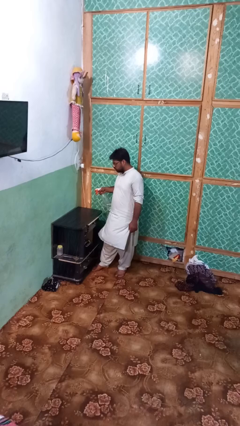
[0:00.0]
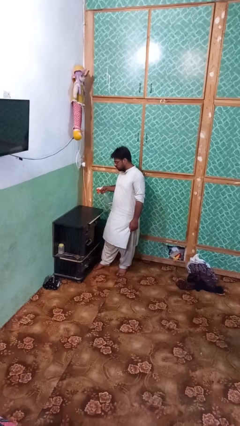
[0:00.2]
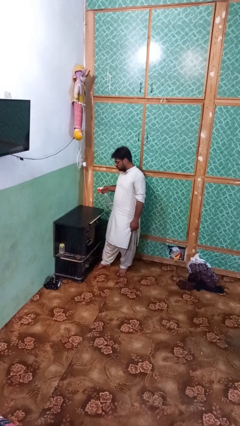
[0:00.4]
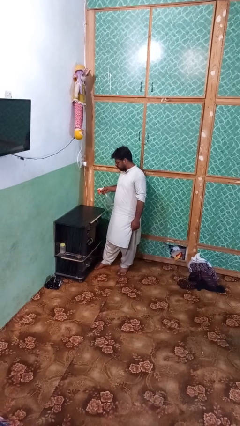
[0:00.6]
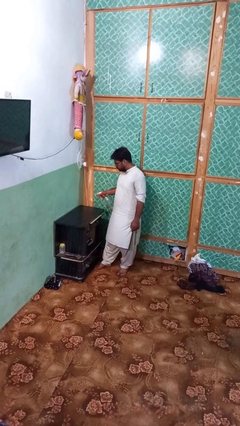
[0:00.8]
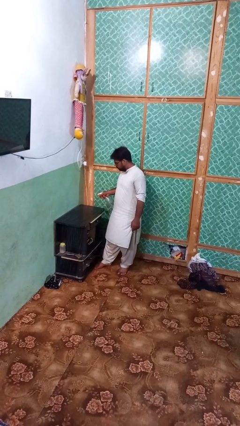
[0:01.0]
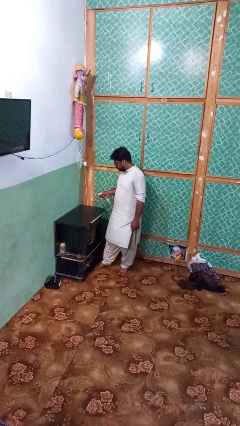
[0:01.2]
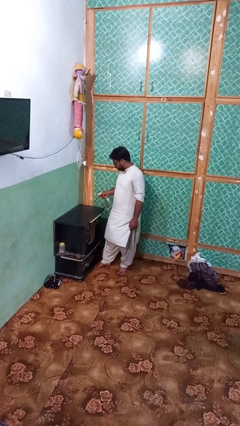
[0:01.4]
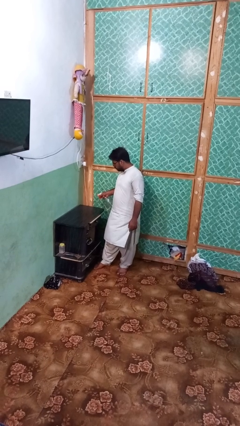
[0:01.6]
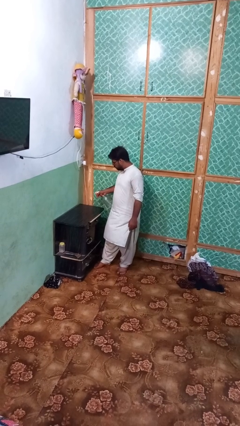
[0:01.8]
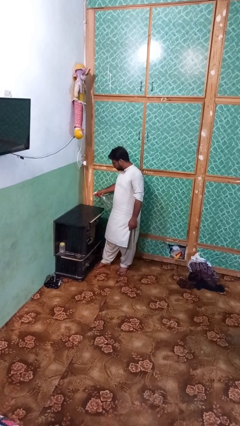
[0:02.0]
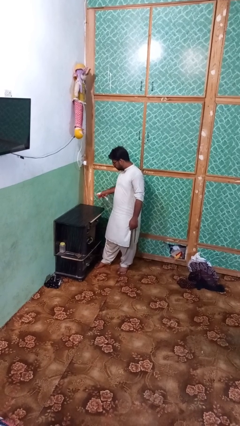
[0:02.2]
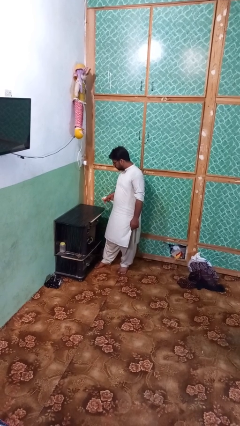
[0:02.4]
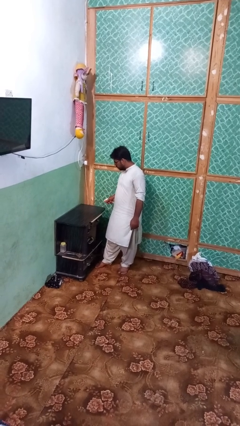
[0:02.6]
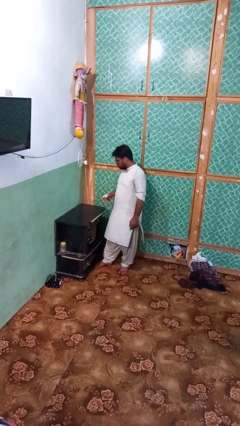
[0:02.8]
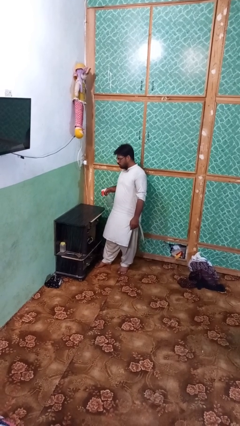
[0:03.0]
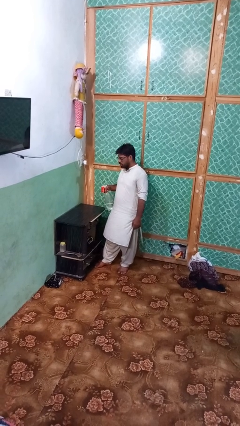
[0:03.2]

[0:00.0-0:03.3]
person sprays from bottle

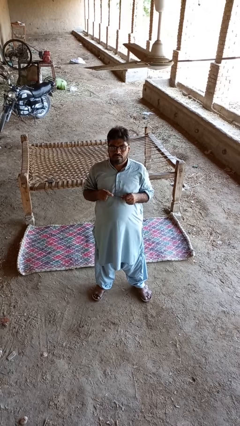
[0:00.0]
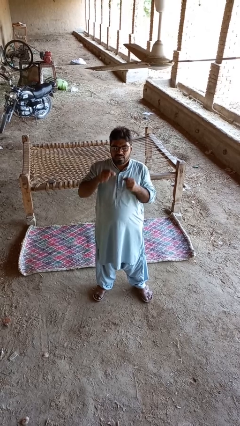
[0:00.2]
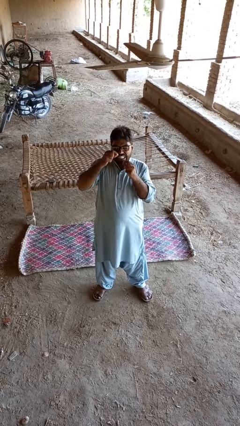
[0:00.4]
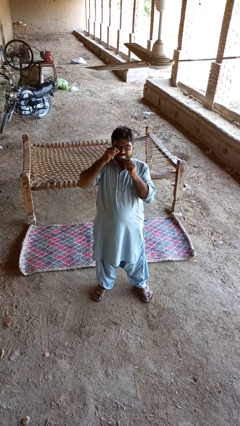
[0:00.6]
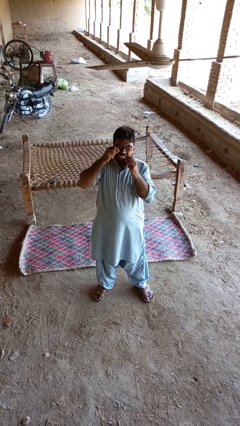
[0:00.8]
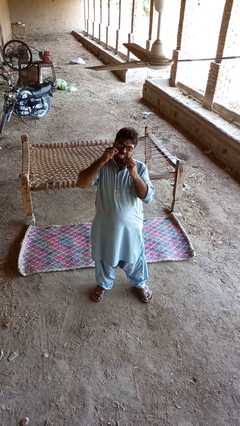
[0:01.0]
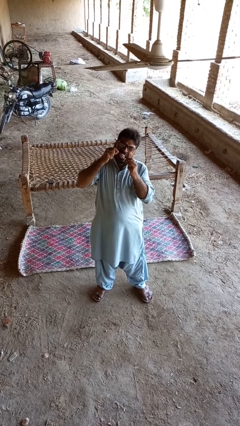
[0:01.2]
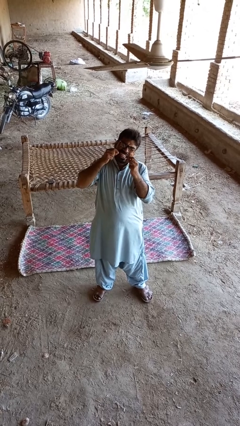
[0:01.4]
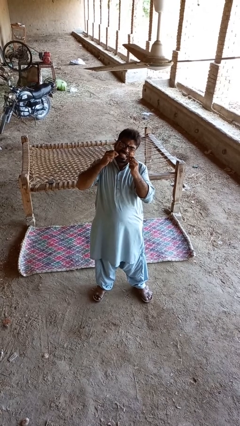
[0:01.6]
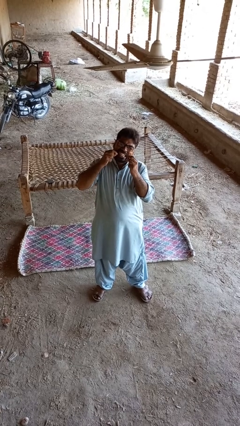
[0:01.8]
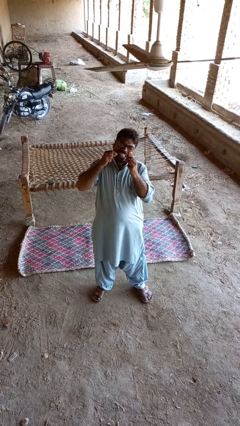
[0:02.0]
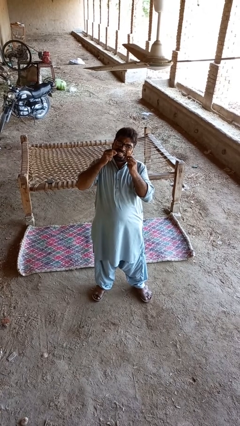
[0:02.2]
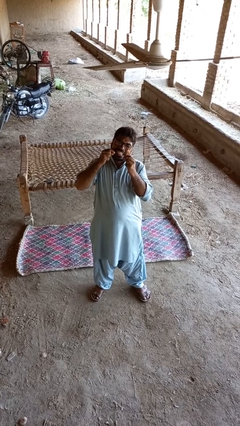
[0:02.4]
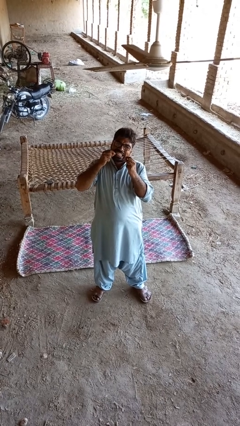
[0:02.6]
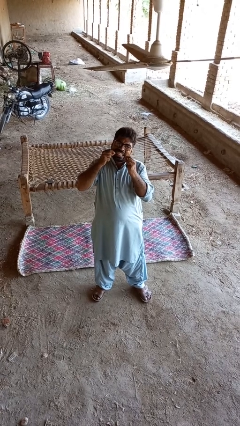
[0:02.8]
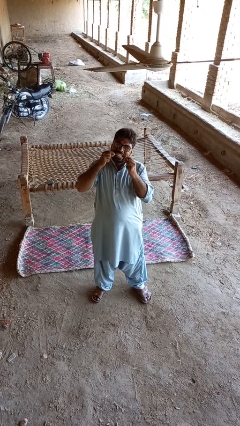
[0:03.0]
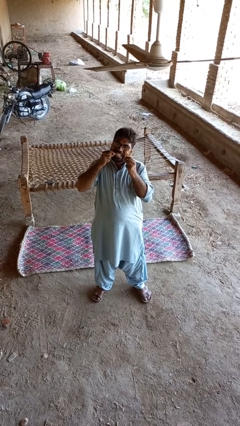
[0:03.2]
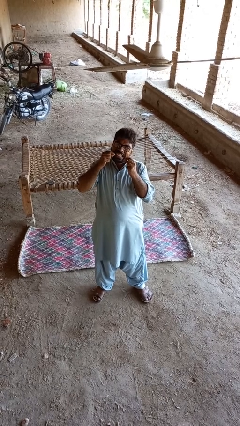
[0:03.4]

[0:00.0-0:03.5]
person flosses

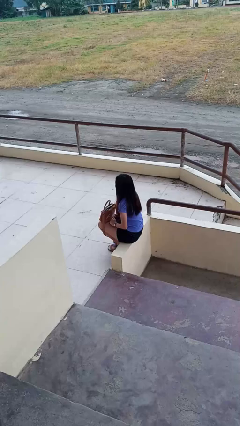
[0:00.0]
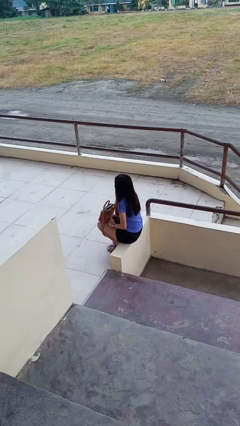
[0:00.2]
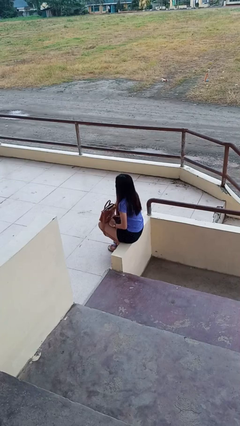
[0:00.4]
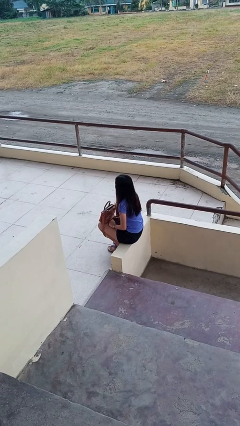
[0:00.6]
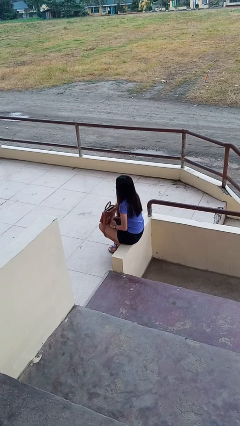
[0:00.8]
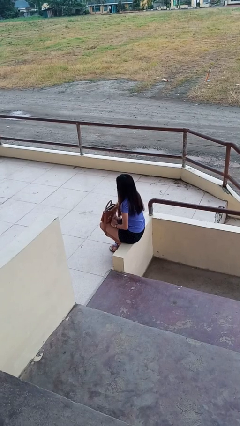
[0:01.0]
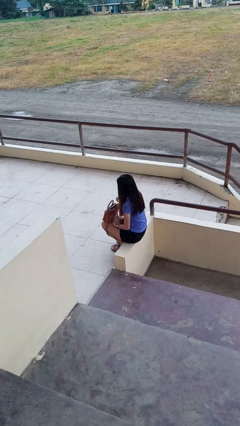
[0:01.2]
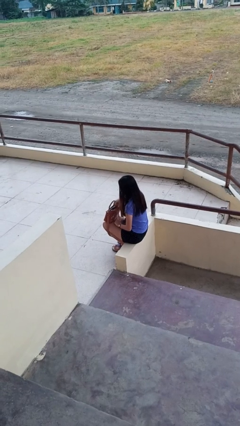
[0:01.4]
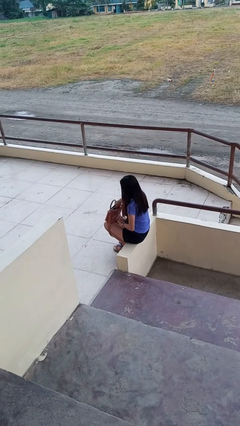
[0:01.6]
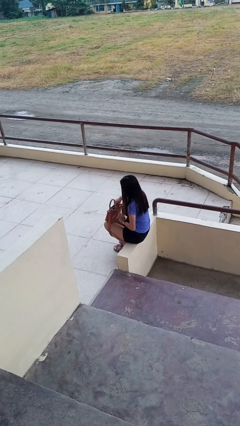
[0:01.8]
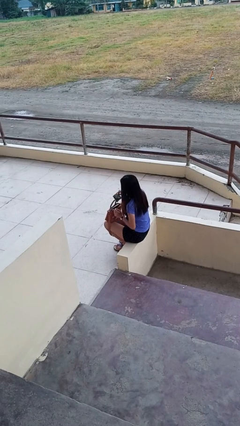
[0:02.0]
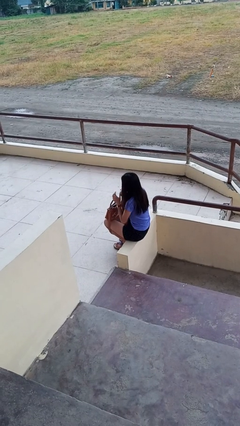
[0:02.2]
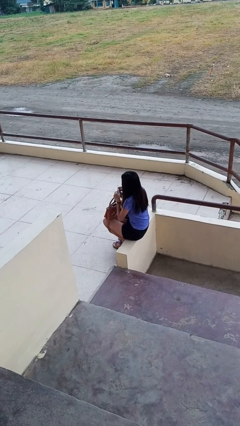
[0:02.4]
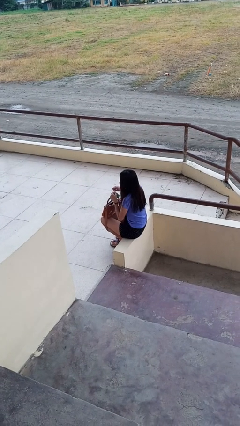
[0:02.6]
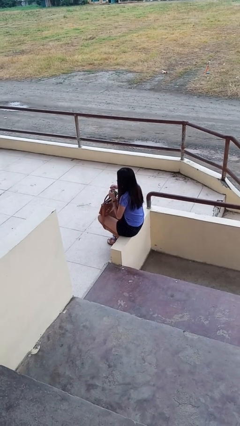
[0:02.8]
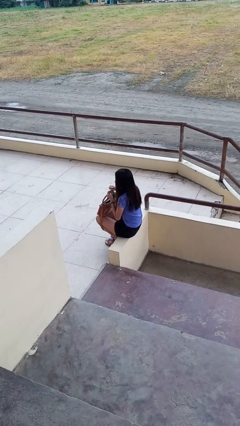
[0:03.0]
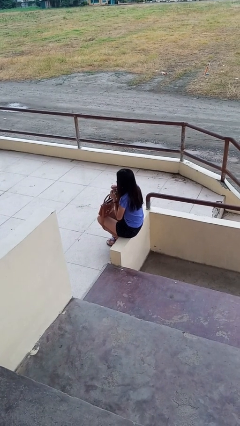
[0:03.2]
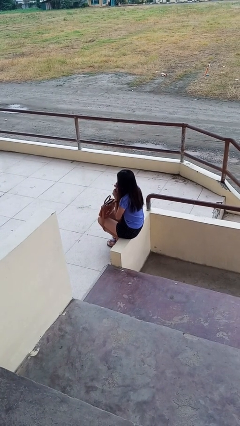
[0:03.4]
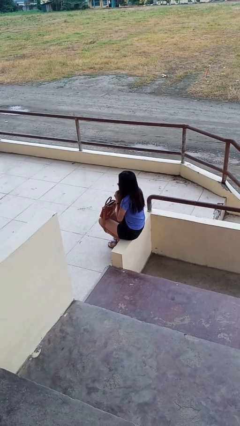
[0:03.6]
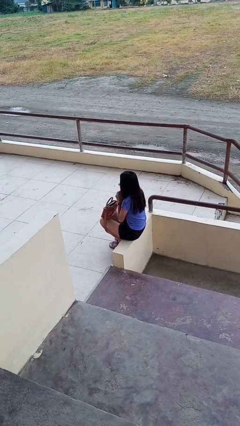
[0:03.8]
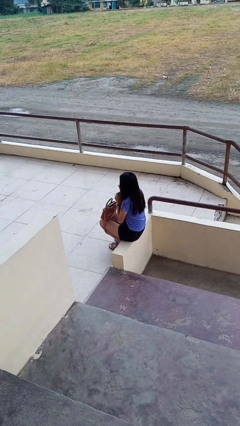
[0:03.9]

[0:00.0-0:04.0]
person eats snack from bag

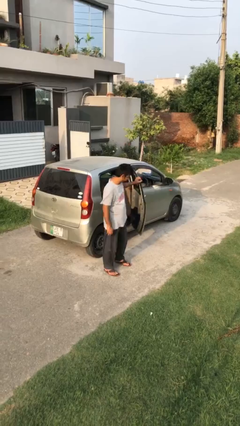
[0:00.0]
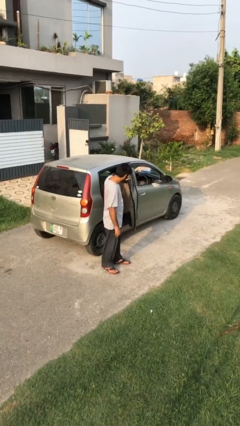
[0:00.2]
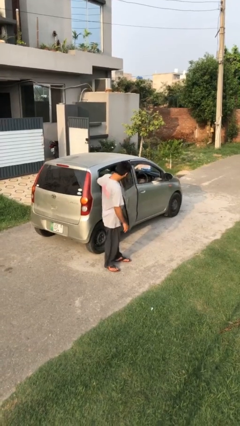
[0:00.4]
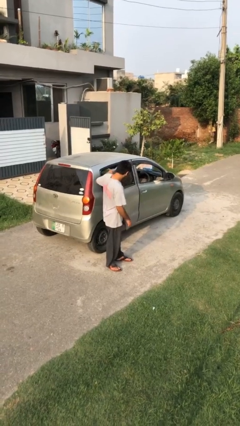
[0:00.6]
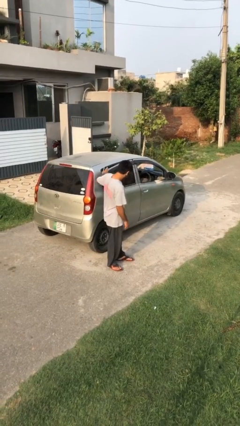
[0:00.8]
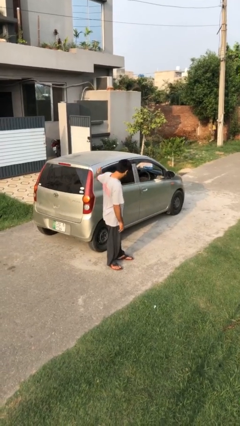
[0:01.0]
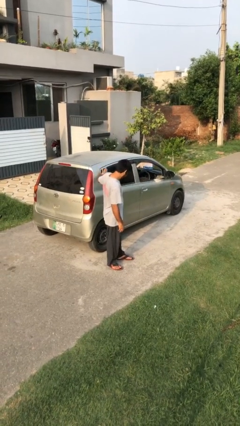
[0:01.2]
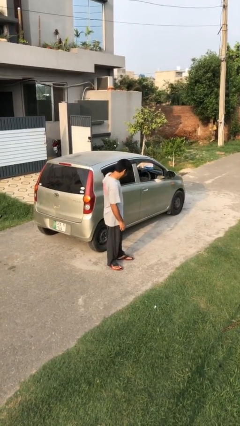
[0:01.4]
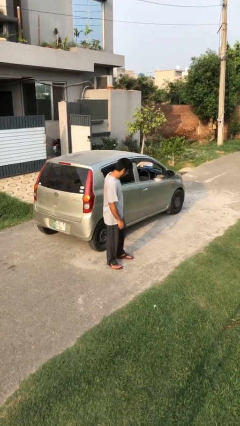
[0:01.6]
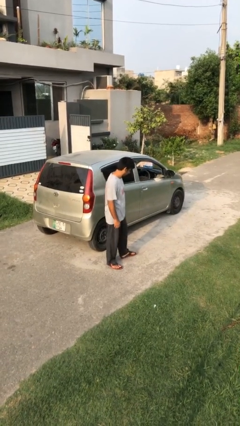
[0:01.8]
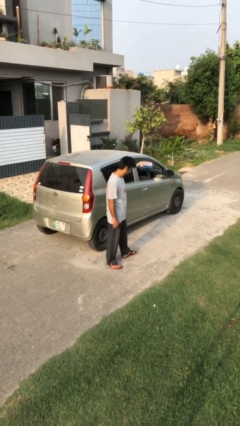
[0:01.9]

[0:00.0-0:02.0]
person closes car door

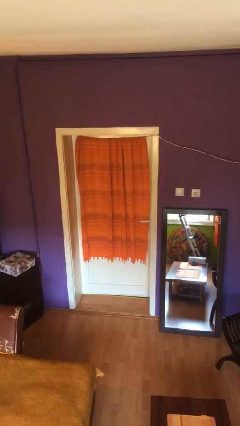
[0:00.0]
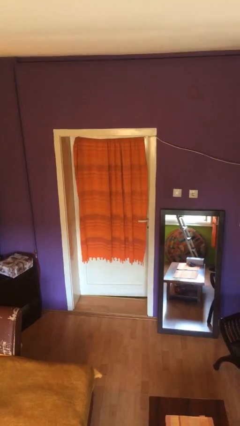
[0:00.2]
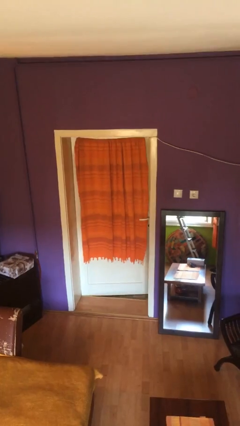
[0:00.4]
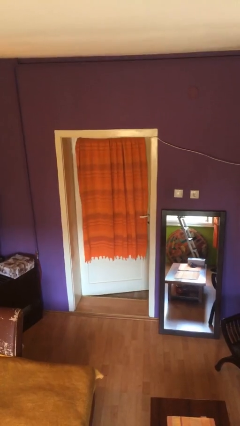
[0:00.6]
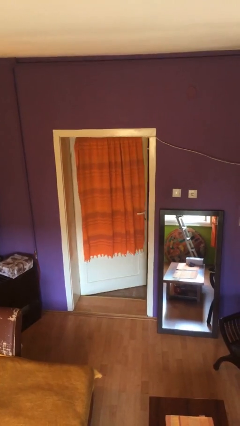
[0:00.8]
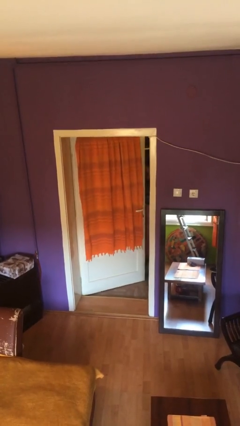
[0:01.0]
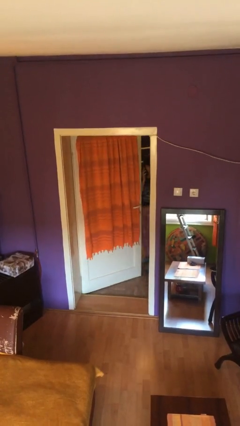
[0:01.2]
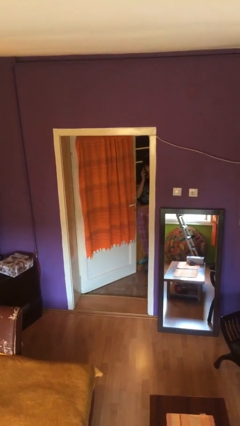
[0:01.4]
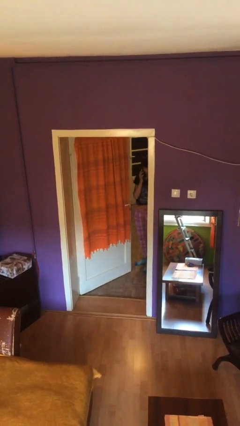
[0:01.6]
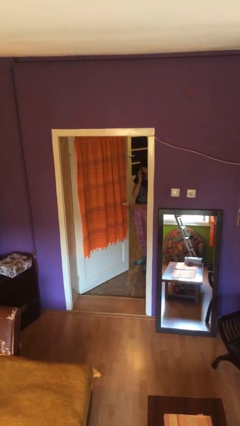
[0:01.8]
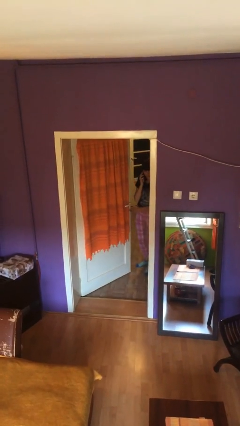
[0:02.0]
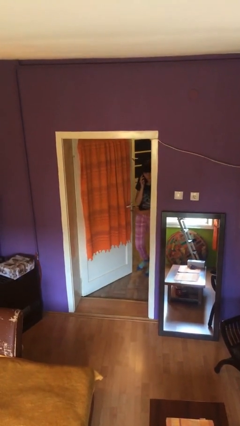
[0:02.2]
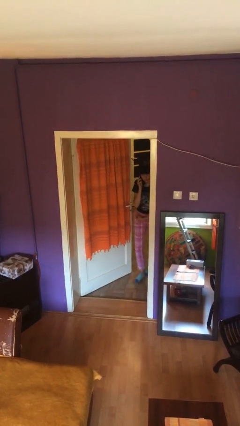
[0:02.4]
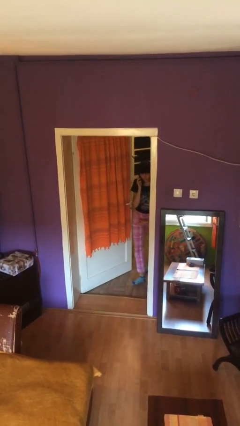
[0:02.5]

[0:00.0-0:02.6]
person opens facility door

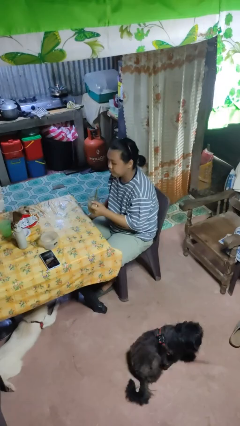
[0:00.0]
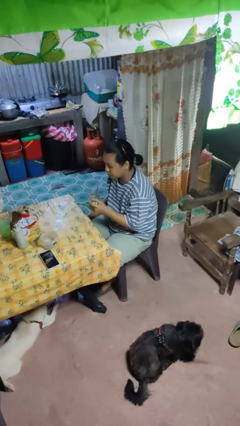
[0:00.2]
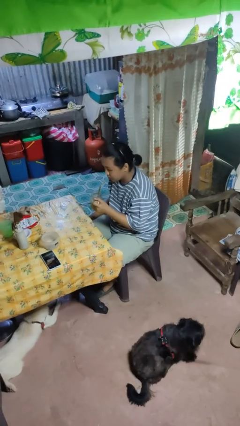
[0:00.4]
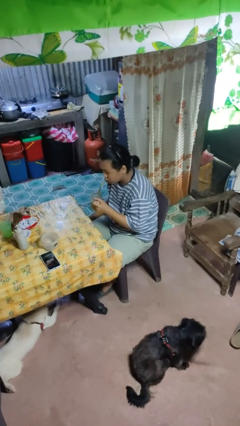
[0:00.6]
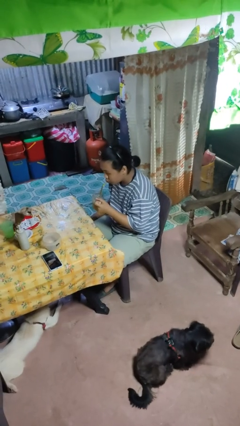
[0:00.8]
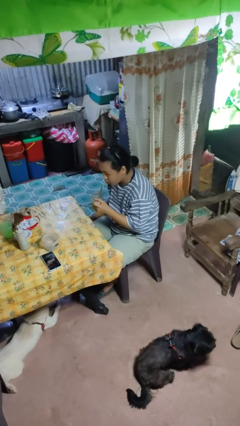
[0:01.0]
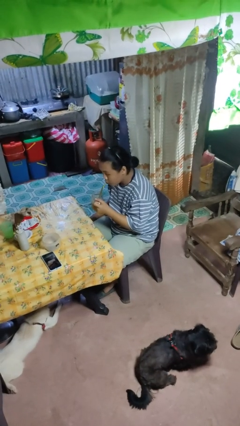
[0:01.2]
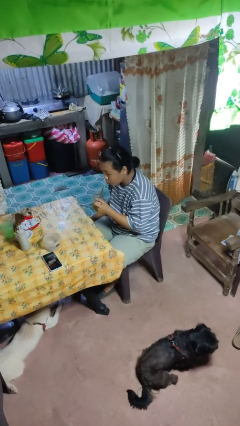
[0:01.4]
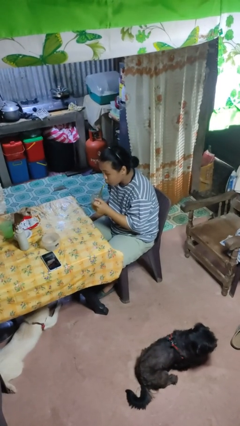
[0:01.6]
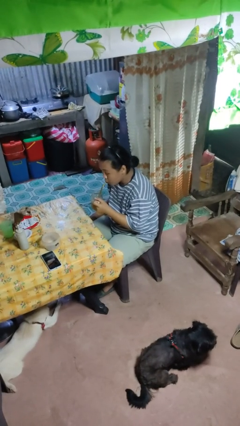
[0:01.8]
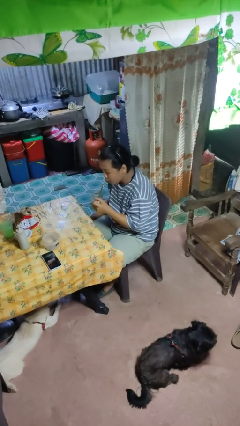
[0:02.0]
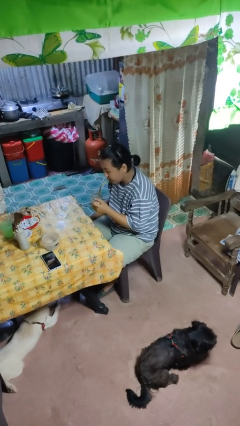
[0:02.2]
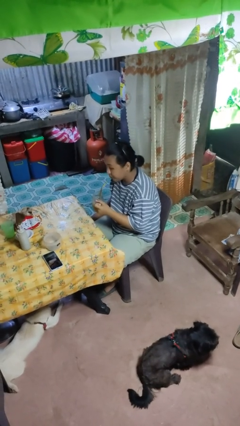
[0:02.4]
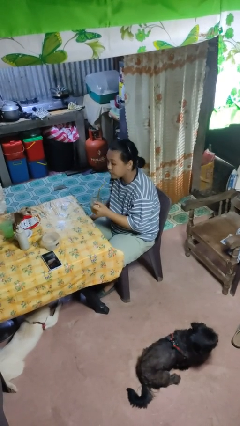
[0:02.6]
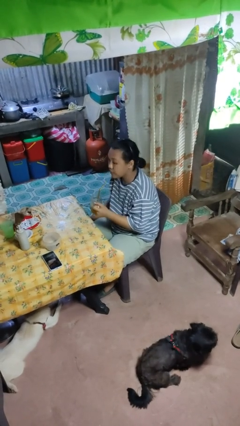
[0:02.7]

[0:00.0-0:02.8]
person drinks from straw
